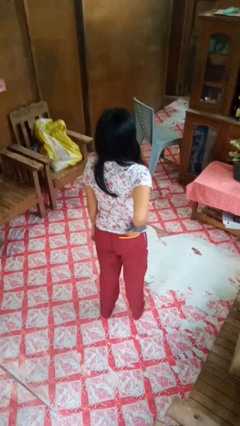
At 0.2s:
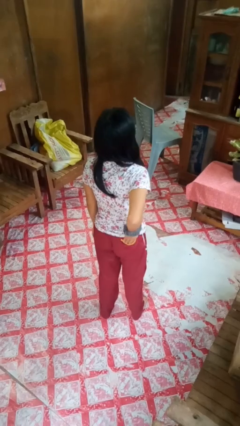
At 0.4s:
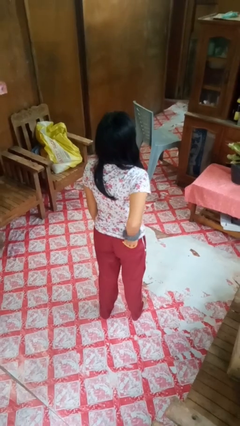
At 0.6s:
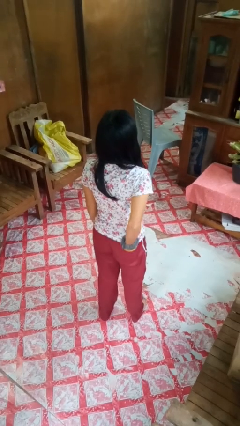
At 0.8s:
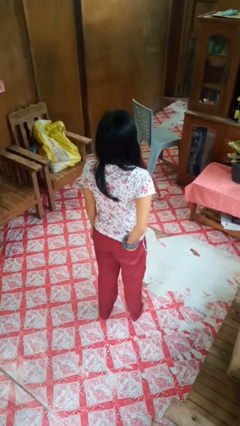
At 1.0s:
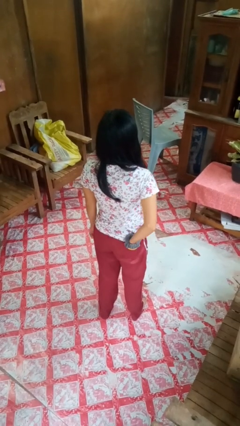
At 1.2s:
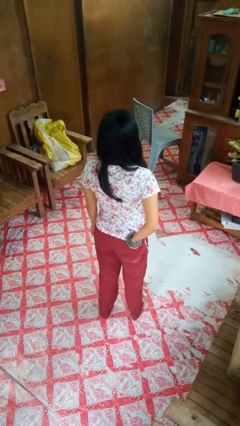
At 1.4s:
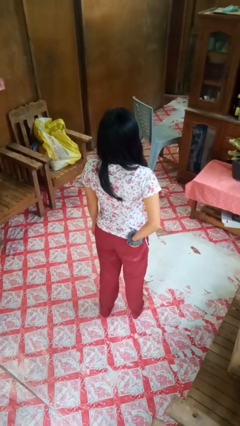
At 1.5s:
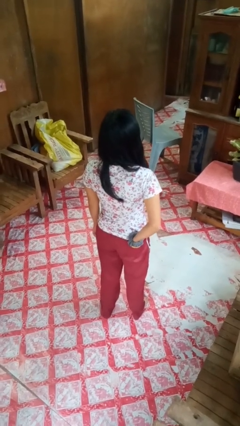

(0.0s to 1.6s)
person puts hands in back pockets

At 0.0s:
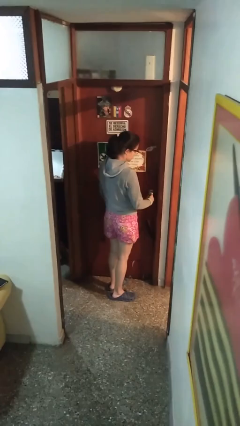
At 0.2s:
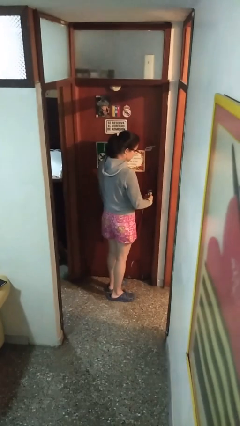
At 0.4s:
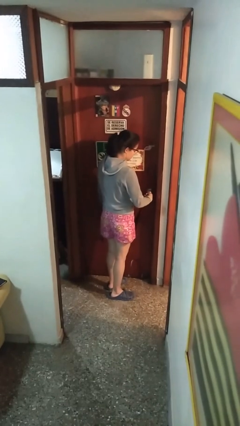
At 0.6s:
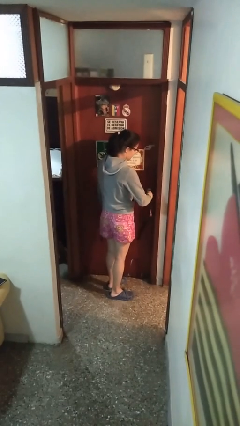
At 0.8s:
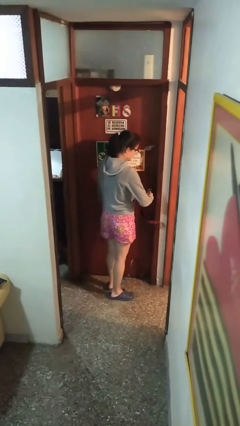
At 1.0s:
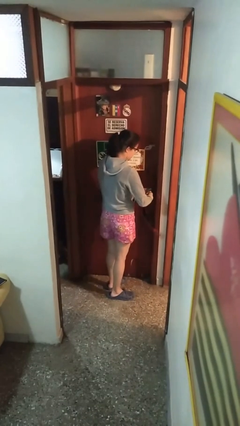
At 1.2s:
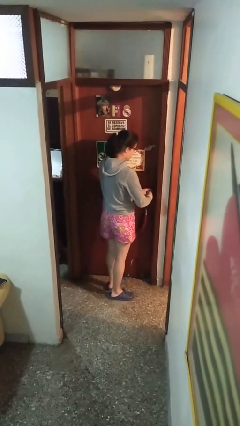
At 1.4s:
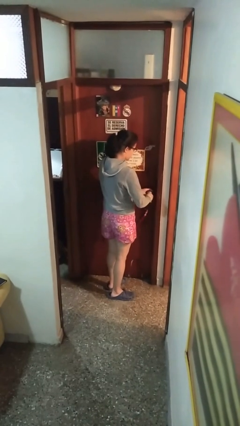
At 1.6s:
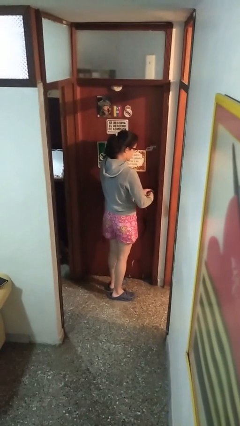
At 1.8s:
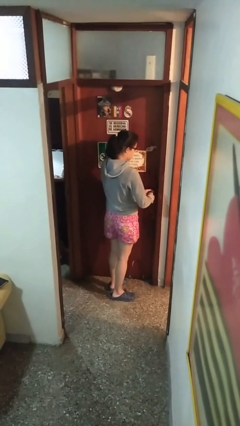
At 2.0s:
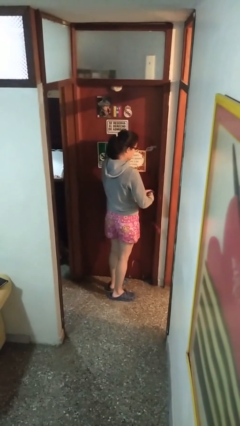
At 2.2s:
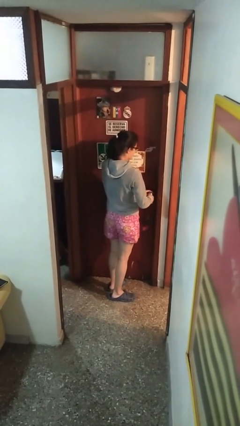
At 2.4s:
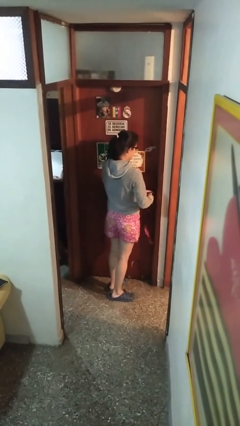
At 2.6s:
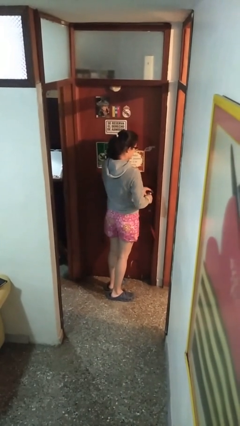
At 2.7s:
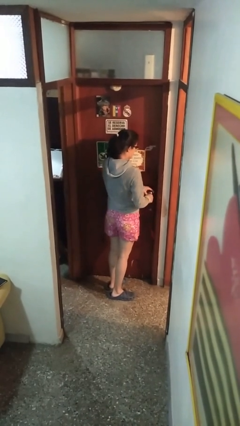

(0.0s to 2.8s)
person locks door with keys

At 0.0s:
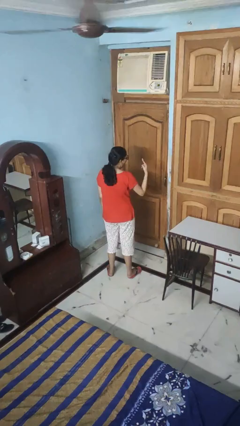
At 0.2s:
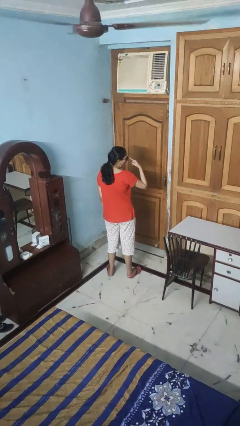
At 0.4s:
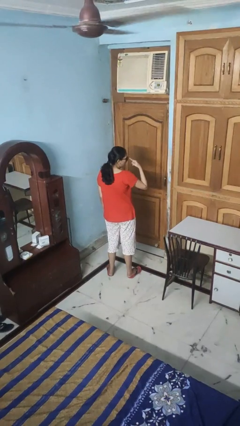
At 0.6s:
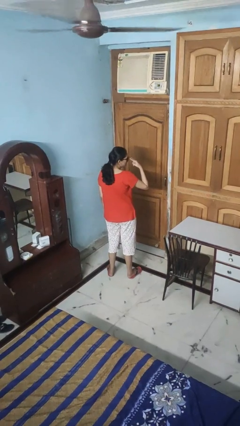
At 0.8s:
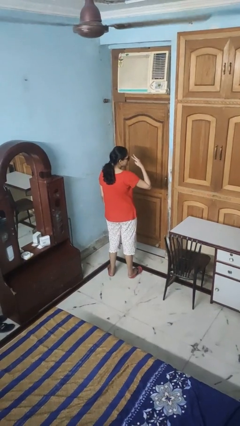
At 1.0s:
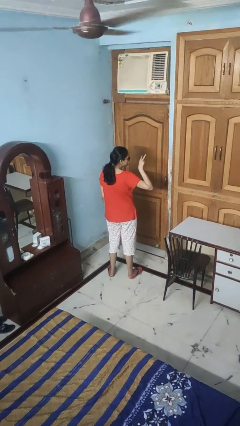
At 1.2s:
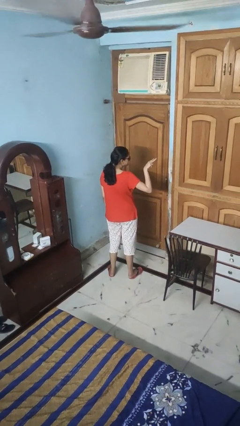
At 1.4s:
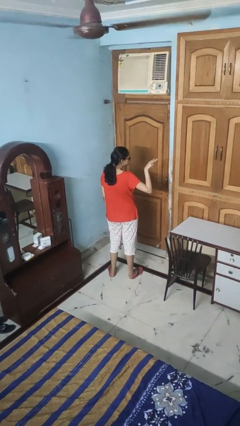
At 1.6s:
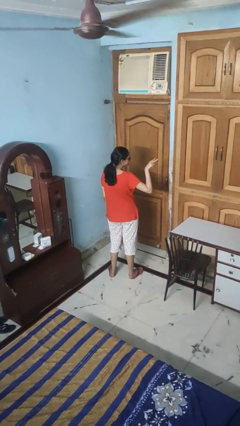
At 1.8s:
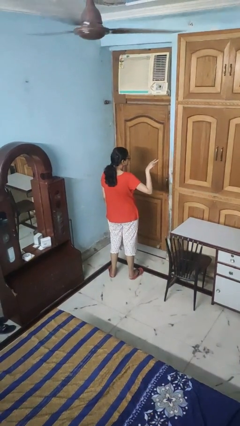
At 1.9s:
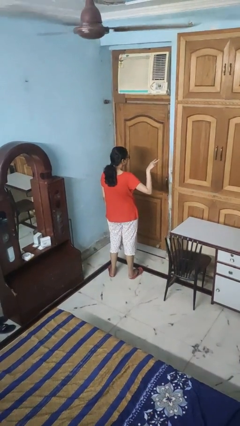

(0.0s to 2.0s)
person gestures watch closely

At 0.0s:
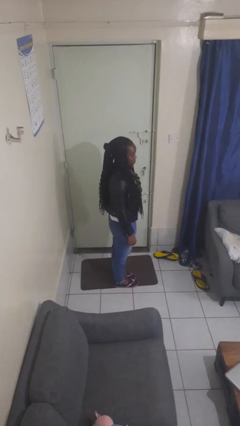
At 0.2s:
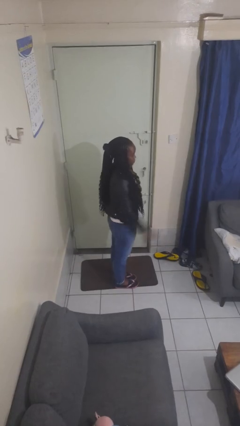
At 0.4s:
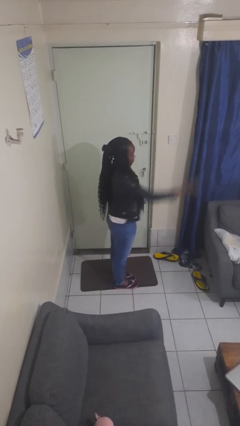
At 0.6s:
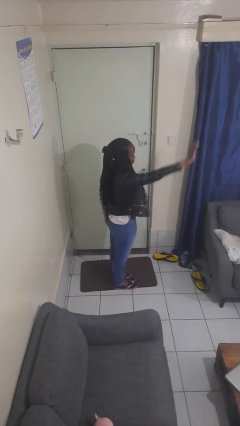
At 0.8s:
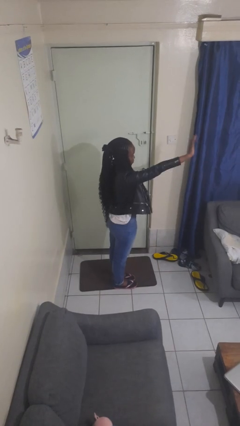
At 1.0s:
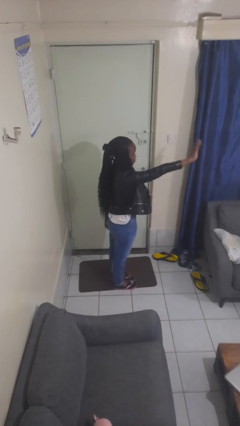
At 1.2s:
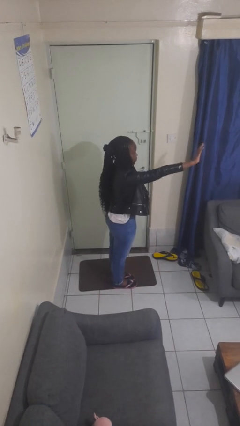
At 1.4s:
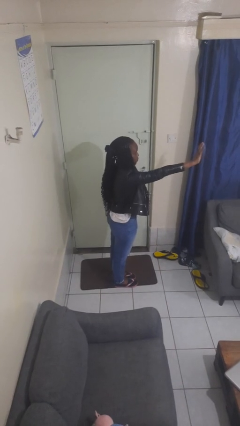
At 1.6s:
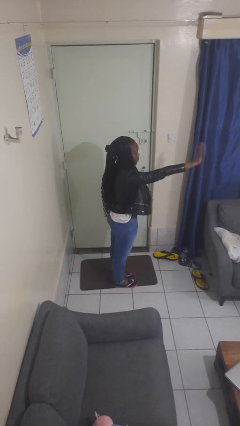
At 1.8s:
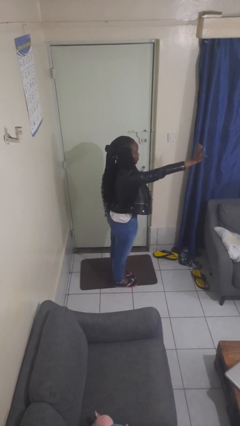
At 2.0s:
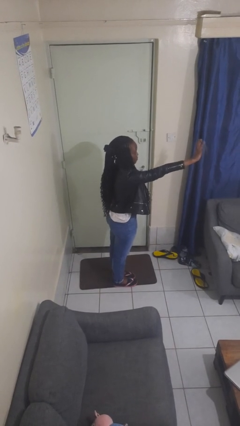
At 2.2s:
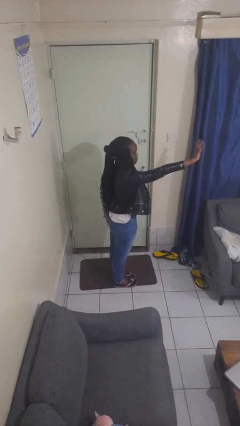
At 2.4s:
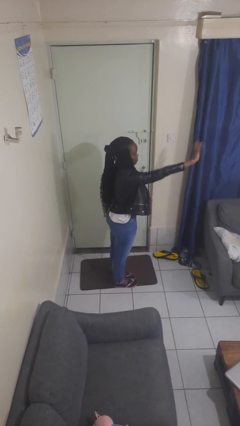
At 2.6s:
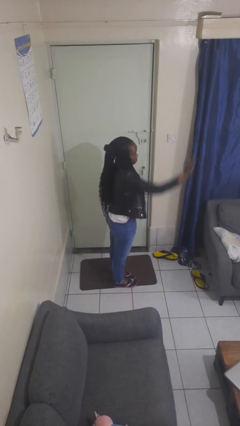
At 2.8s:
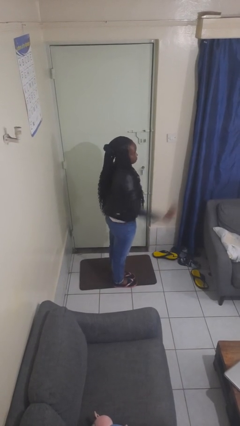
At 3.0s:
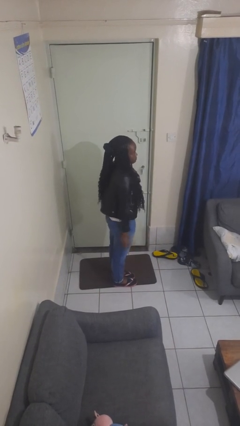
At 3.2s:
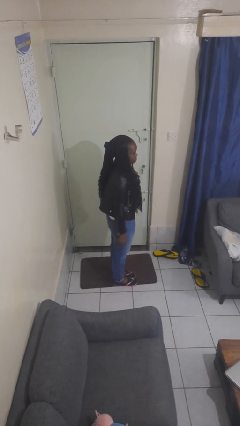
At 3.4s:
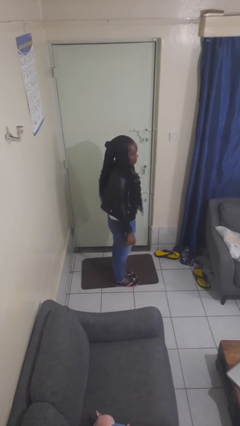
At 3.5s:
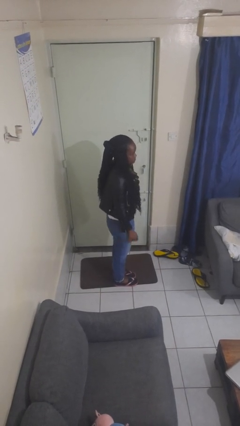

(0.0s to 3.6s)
person waves at person

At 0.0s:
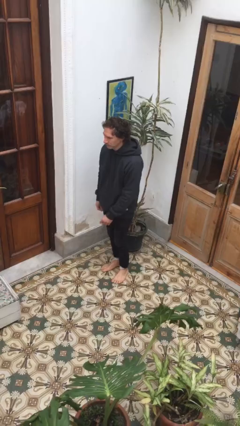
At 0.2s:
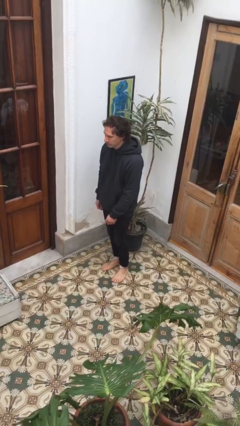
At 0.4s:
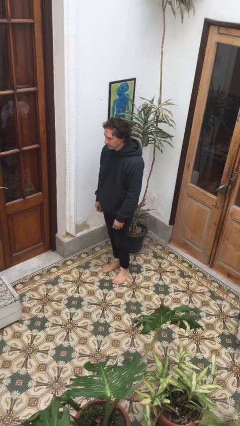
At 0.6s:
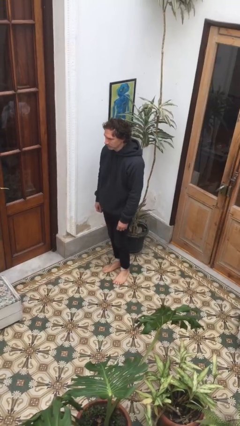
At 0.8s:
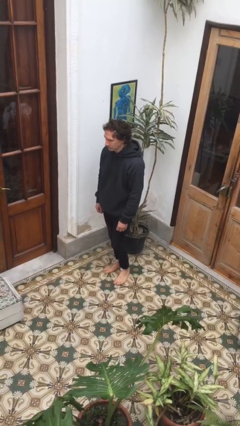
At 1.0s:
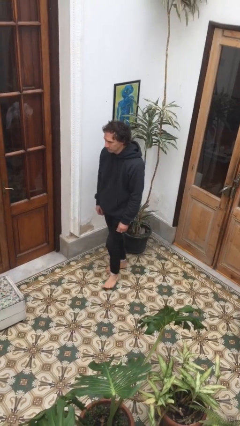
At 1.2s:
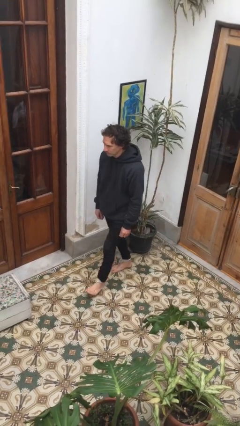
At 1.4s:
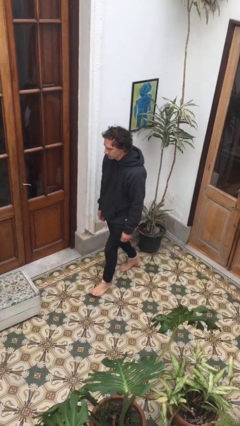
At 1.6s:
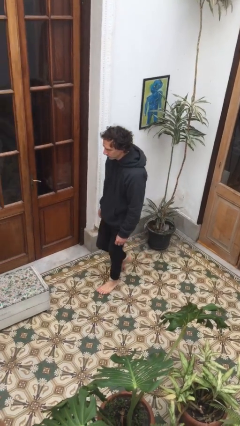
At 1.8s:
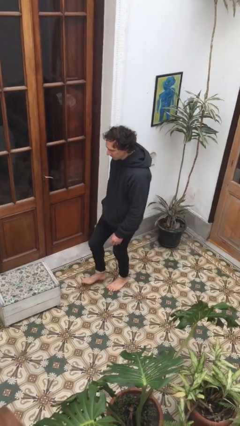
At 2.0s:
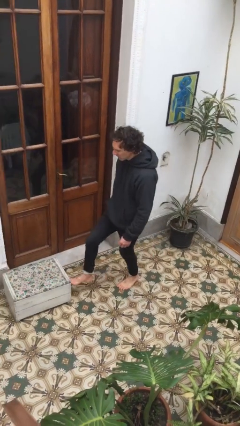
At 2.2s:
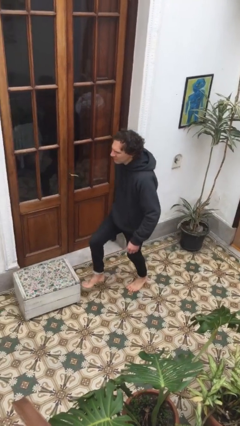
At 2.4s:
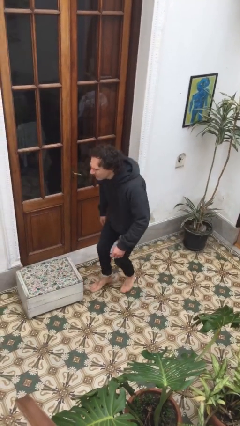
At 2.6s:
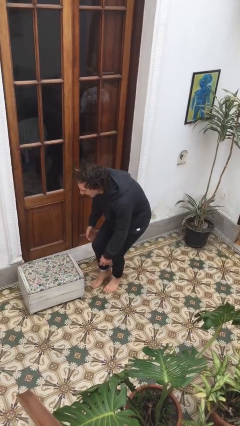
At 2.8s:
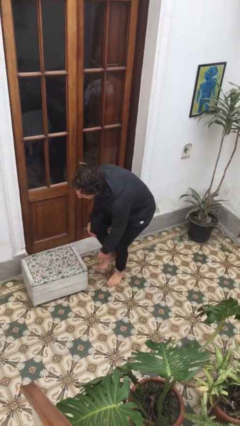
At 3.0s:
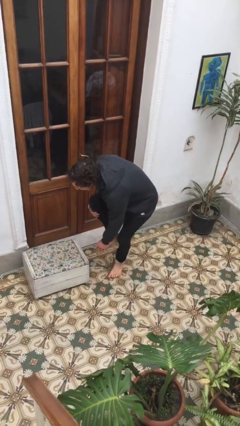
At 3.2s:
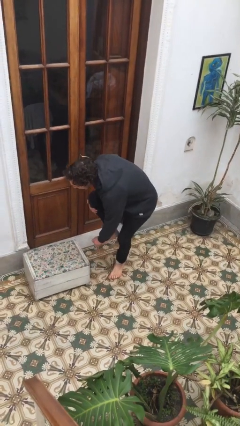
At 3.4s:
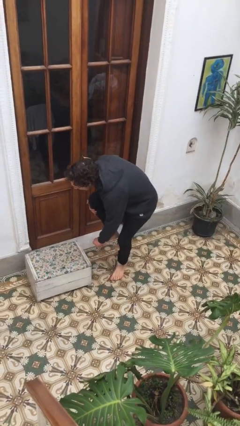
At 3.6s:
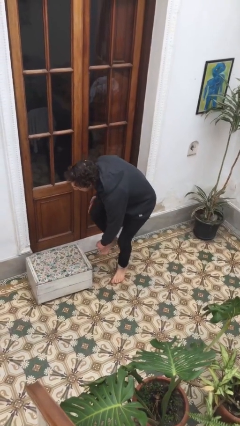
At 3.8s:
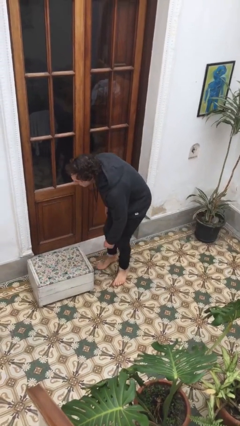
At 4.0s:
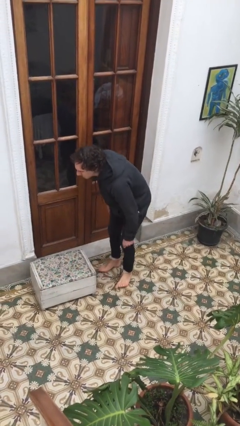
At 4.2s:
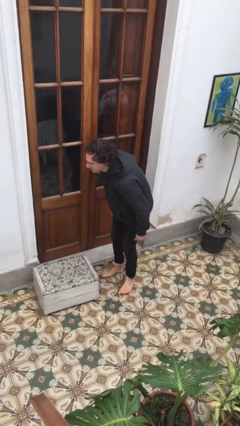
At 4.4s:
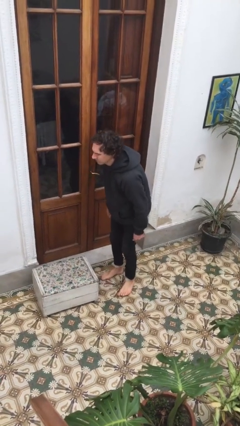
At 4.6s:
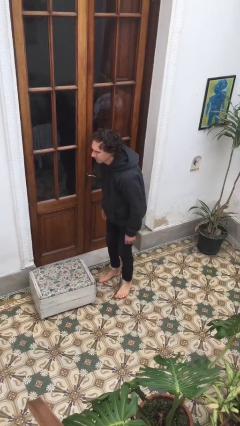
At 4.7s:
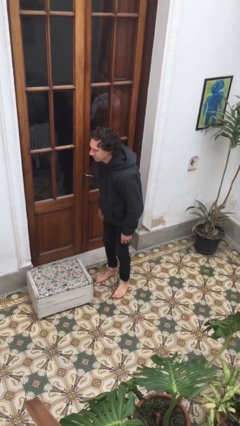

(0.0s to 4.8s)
person stubs toe

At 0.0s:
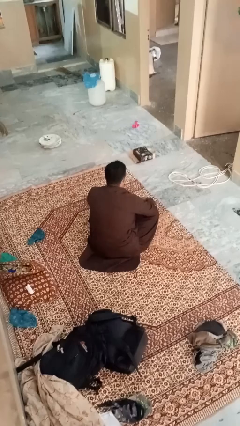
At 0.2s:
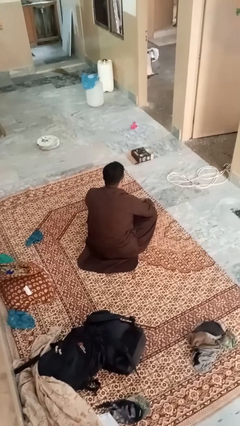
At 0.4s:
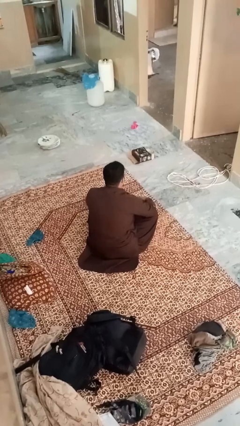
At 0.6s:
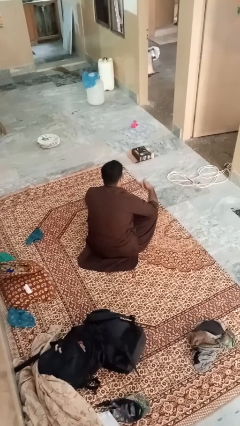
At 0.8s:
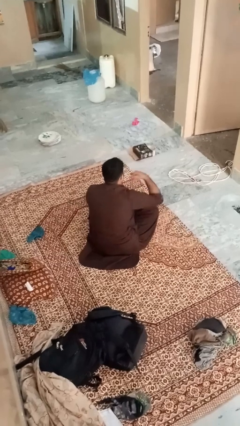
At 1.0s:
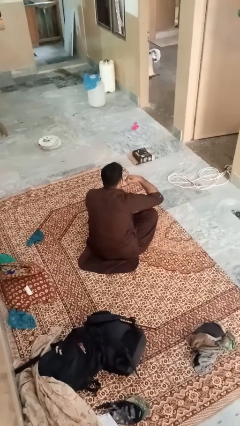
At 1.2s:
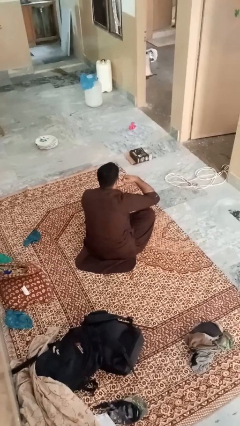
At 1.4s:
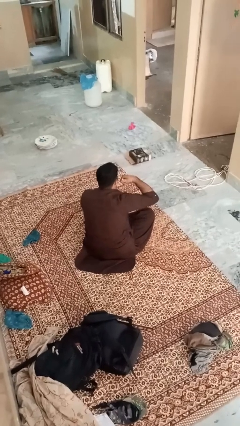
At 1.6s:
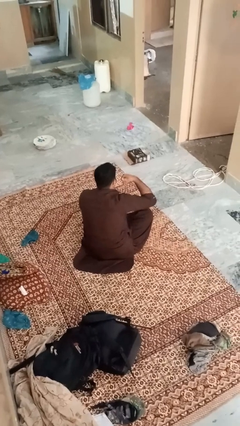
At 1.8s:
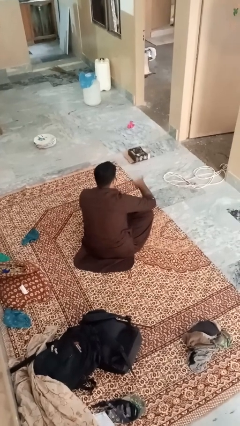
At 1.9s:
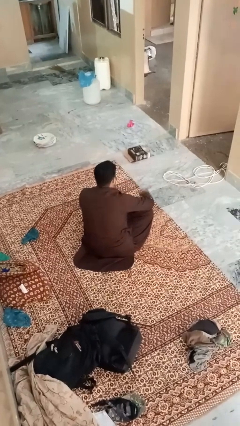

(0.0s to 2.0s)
person gestures call me

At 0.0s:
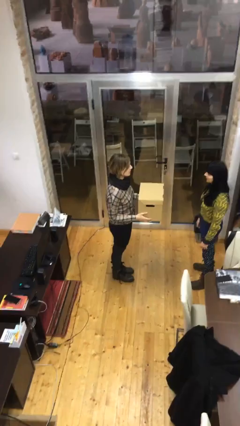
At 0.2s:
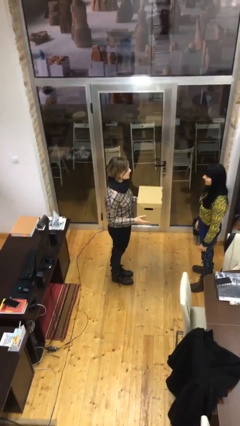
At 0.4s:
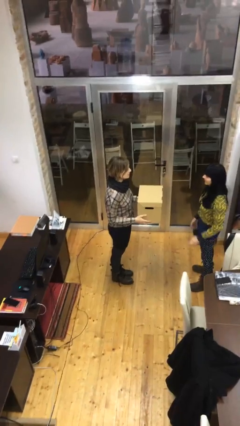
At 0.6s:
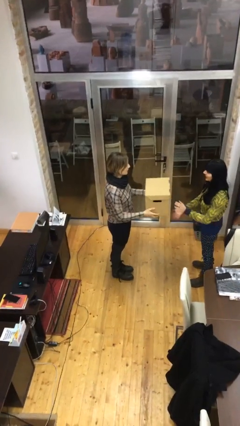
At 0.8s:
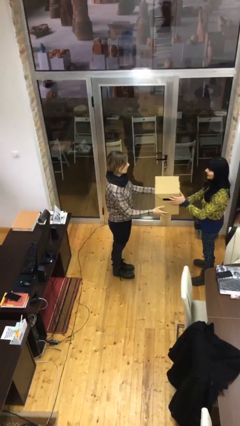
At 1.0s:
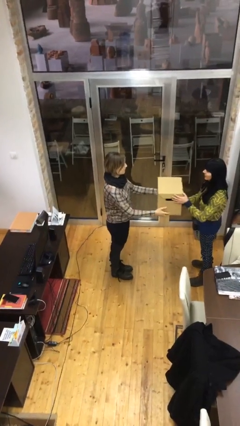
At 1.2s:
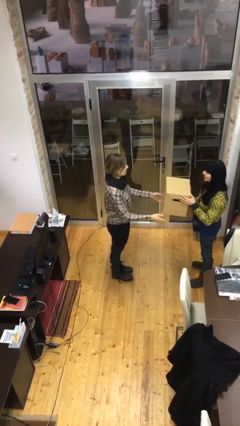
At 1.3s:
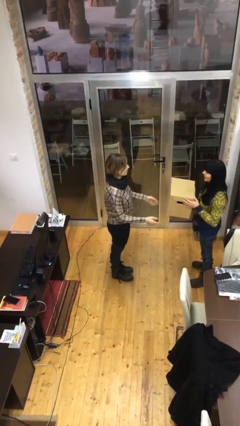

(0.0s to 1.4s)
person transfers object to person
